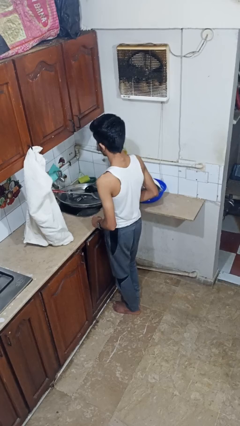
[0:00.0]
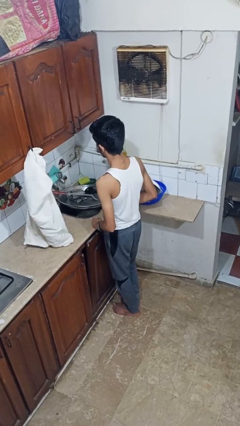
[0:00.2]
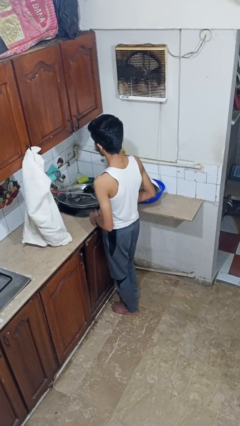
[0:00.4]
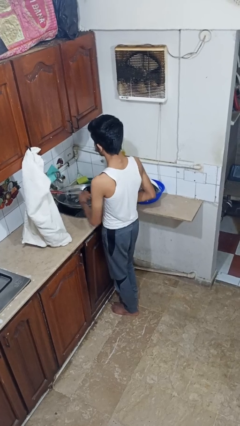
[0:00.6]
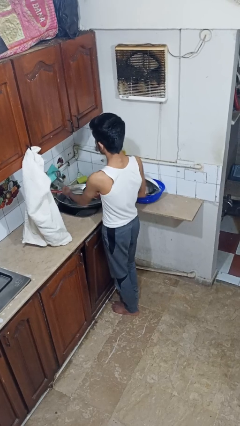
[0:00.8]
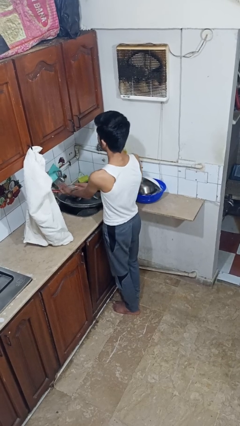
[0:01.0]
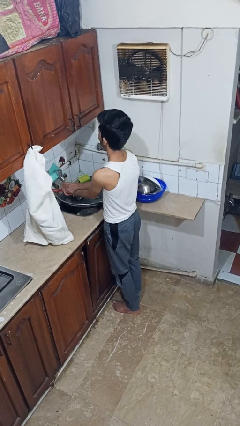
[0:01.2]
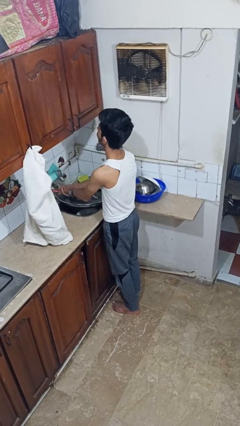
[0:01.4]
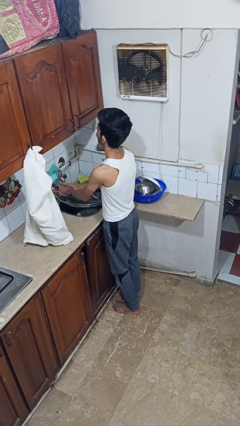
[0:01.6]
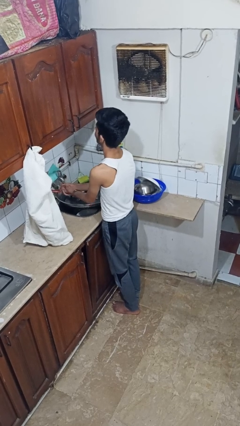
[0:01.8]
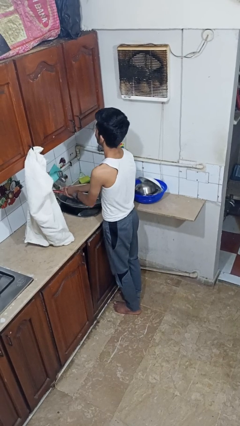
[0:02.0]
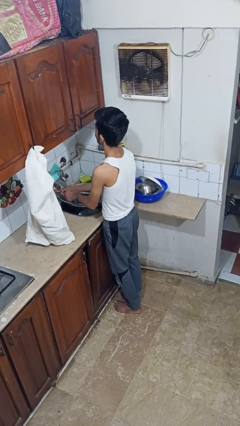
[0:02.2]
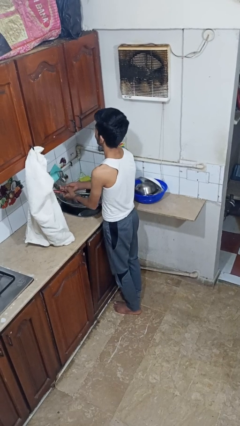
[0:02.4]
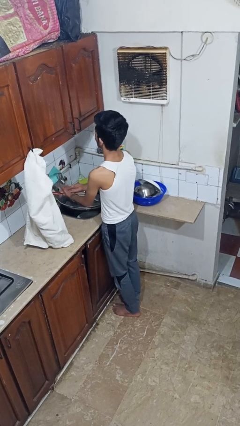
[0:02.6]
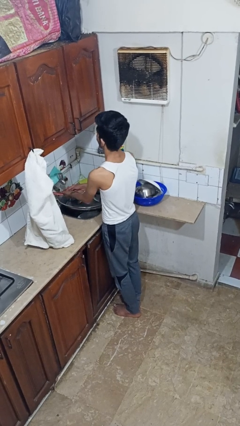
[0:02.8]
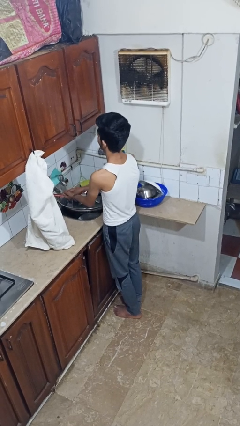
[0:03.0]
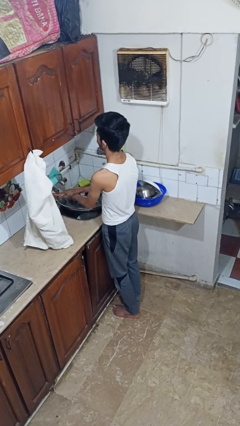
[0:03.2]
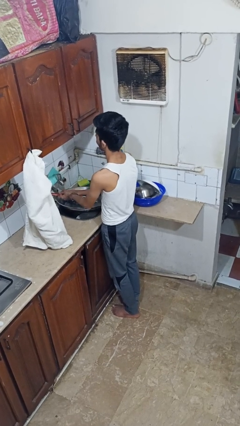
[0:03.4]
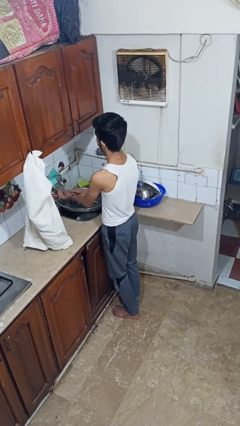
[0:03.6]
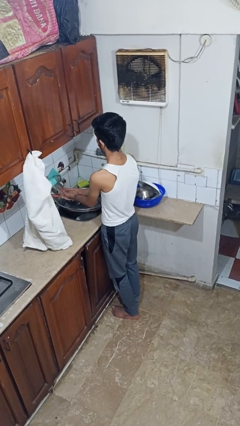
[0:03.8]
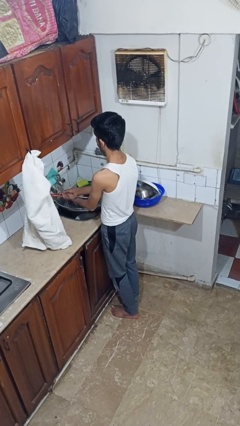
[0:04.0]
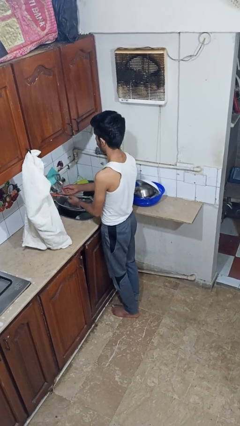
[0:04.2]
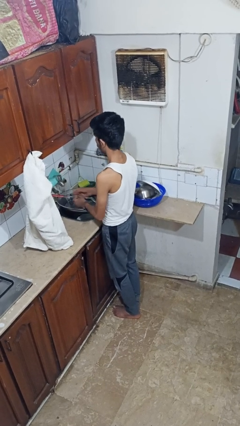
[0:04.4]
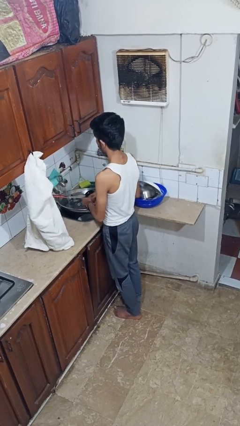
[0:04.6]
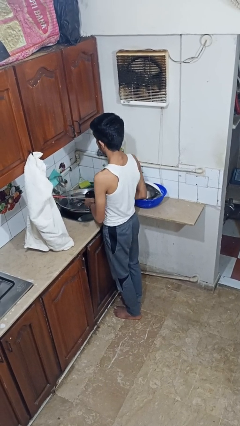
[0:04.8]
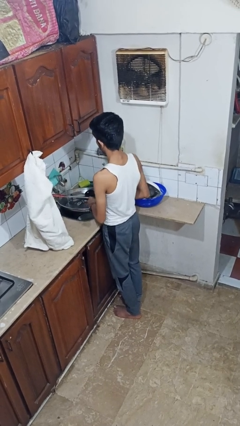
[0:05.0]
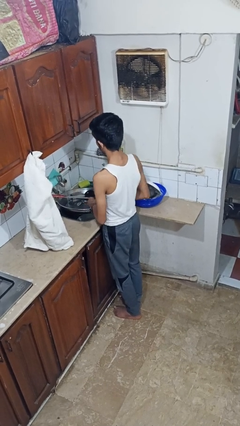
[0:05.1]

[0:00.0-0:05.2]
person washes hands

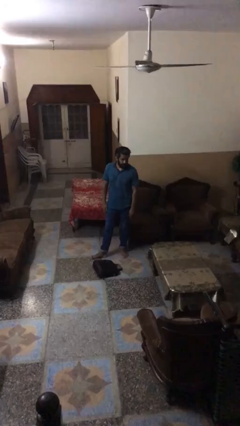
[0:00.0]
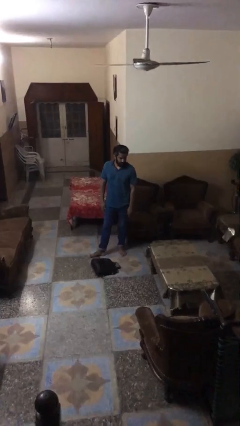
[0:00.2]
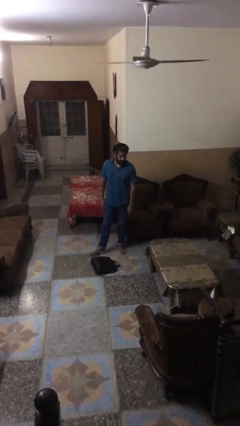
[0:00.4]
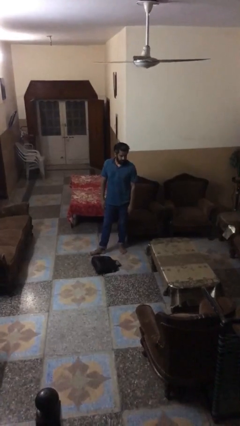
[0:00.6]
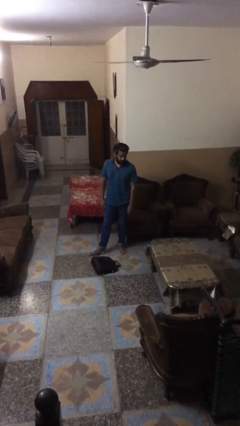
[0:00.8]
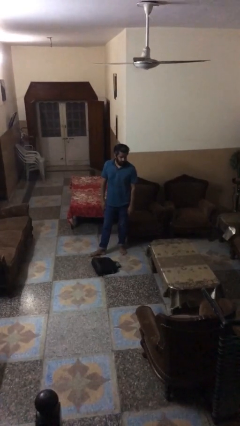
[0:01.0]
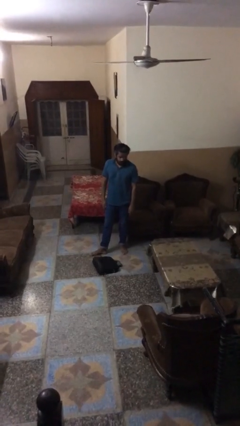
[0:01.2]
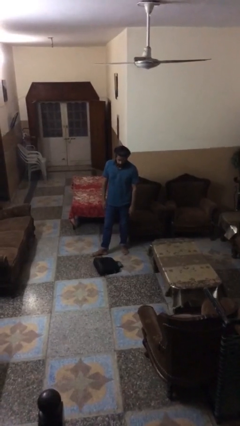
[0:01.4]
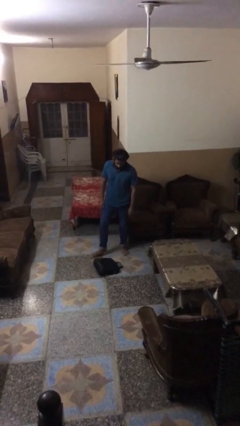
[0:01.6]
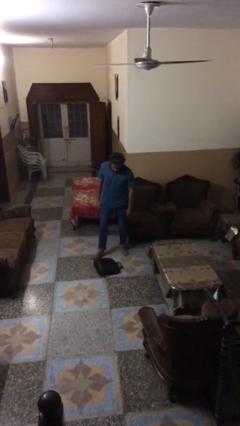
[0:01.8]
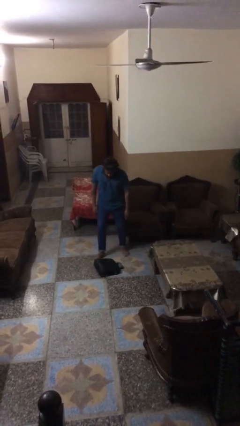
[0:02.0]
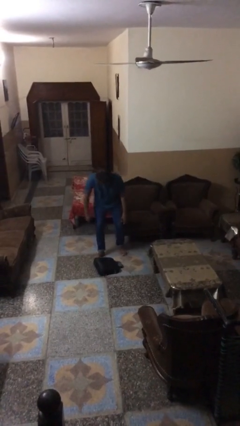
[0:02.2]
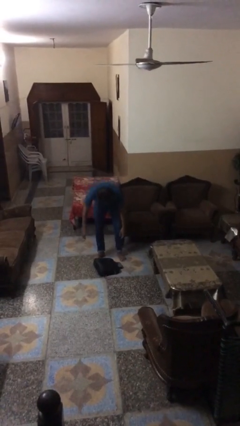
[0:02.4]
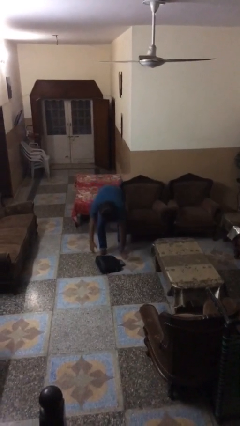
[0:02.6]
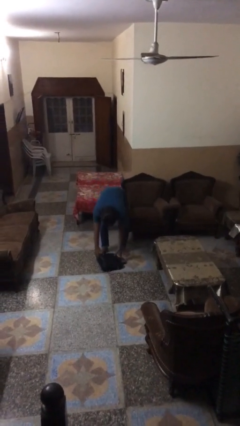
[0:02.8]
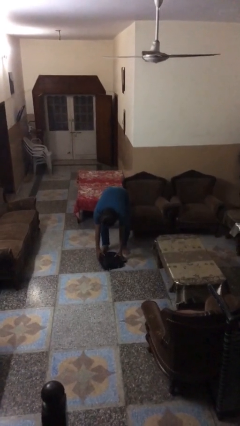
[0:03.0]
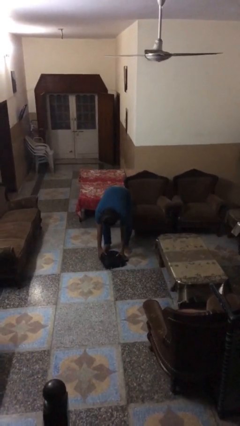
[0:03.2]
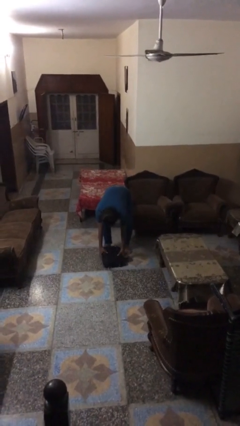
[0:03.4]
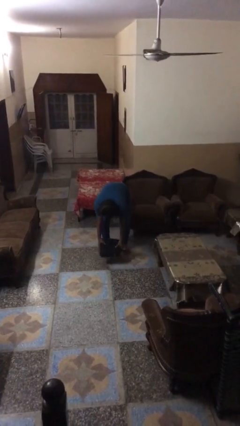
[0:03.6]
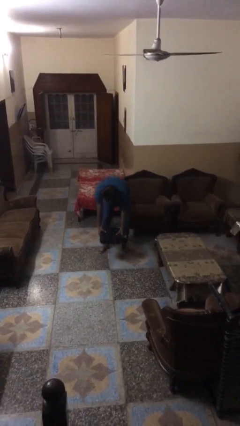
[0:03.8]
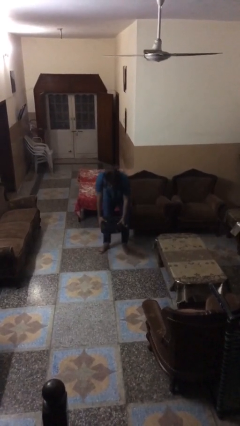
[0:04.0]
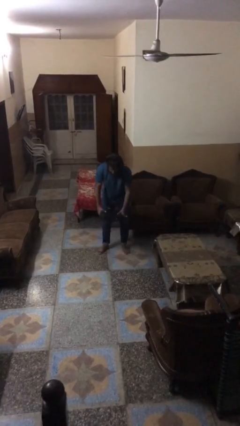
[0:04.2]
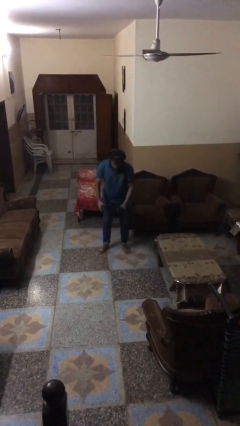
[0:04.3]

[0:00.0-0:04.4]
person picks up object from floor

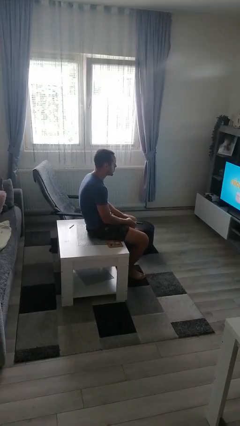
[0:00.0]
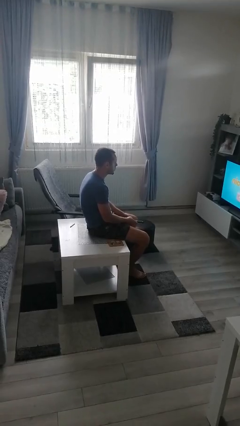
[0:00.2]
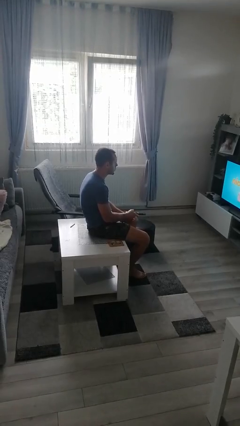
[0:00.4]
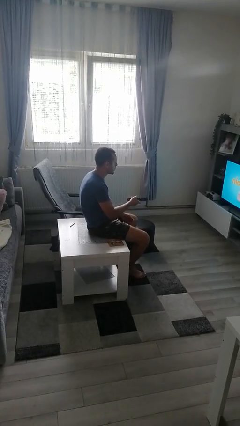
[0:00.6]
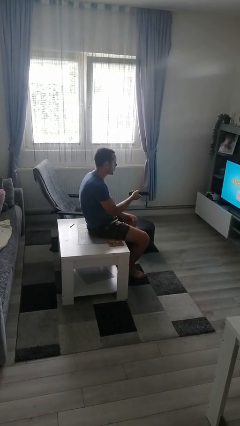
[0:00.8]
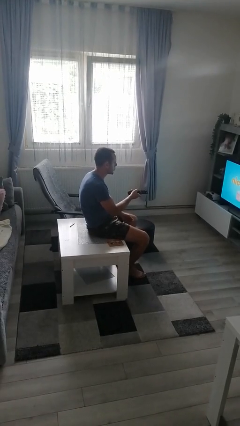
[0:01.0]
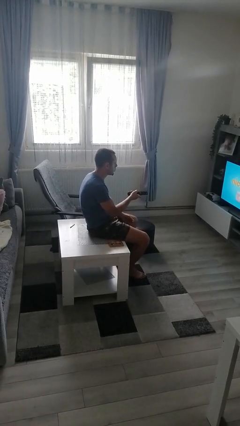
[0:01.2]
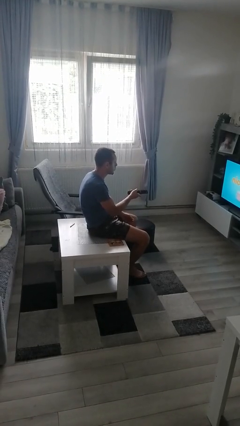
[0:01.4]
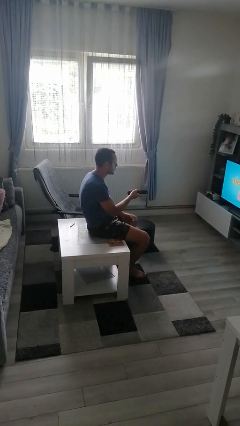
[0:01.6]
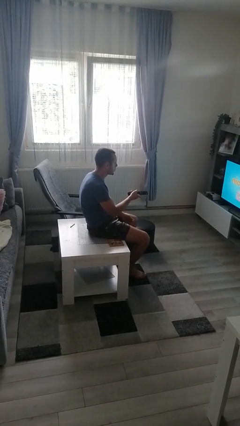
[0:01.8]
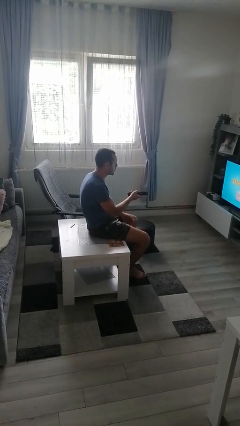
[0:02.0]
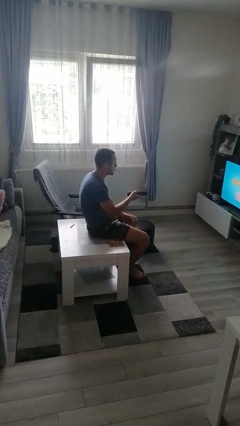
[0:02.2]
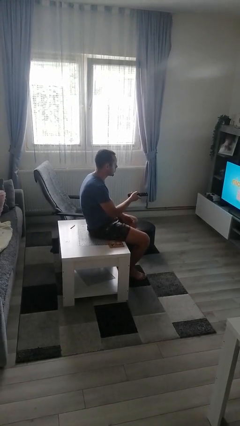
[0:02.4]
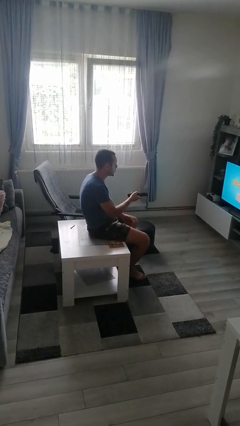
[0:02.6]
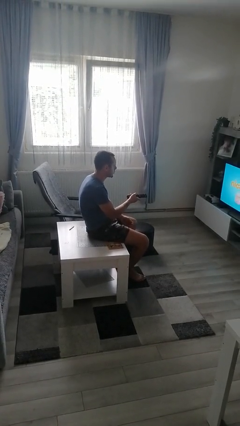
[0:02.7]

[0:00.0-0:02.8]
person uses television remote

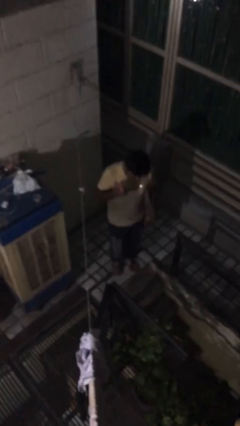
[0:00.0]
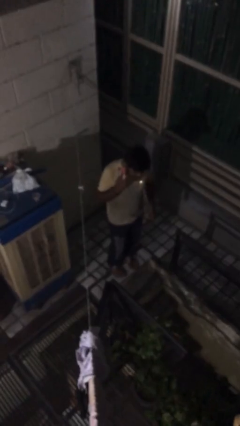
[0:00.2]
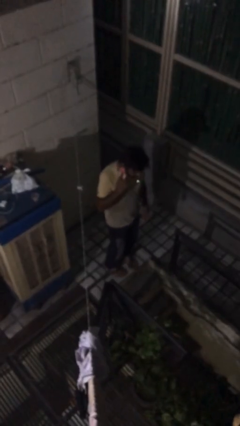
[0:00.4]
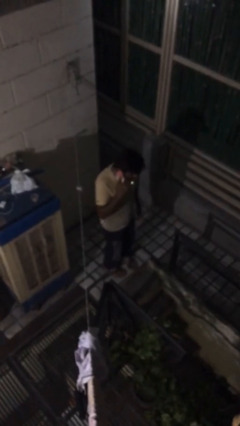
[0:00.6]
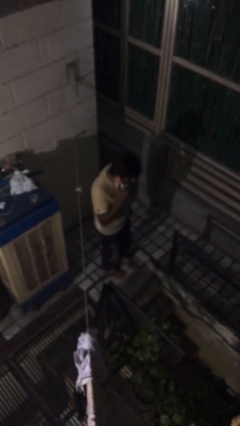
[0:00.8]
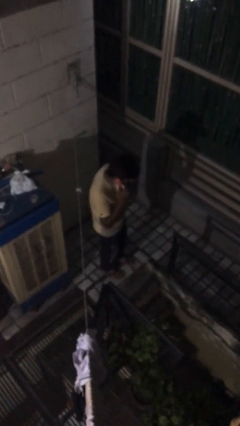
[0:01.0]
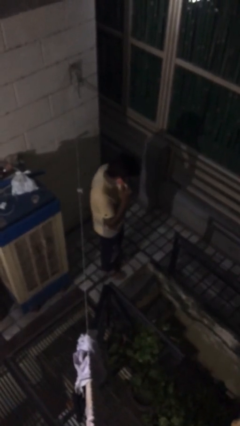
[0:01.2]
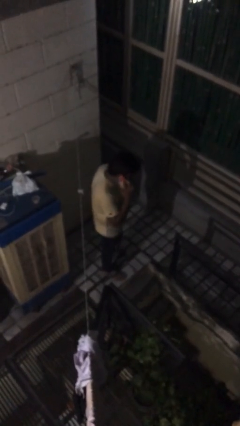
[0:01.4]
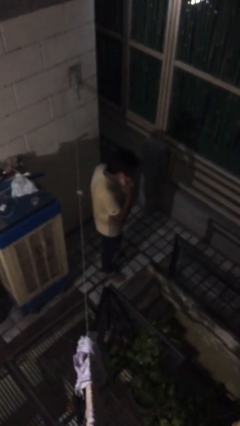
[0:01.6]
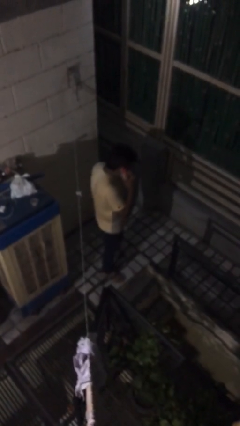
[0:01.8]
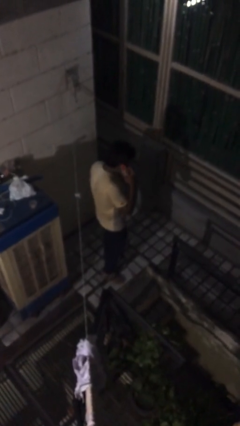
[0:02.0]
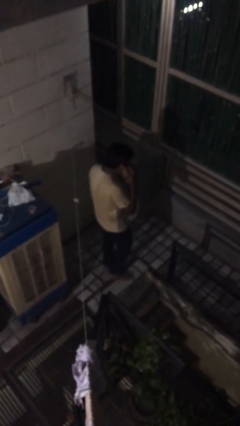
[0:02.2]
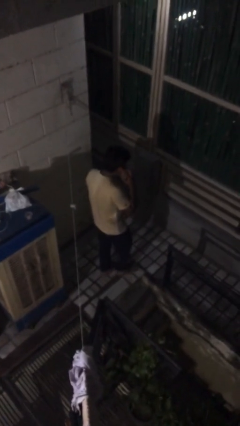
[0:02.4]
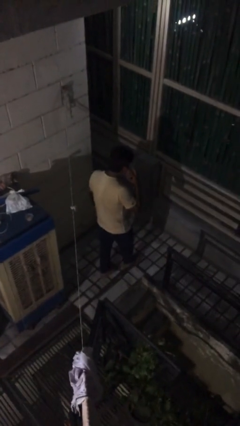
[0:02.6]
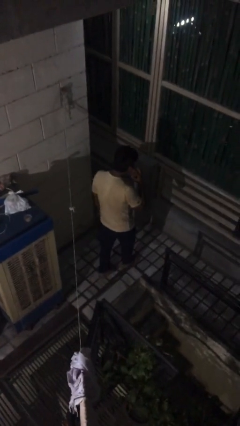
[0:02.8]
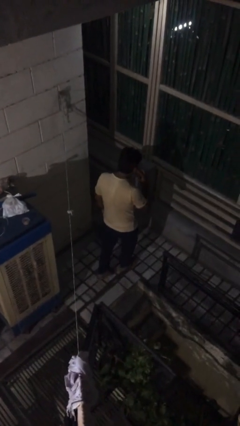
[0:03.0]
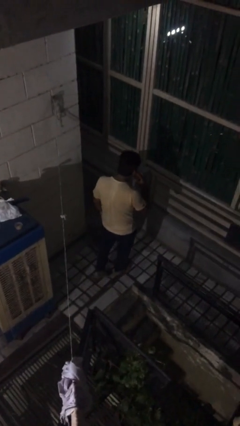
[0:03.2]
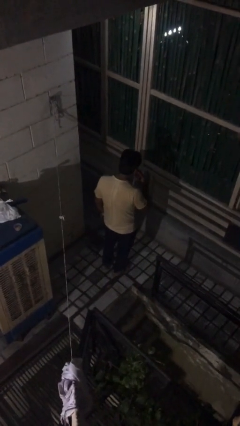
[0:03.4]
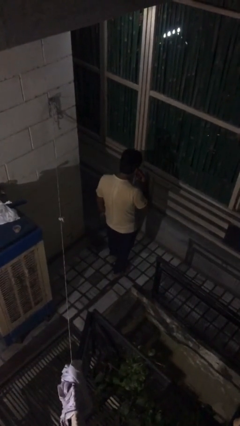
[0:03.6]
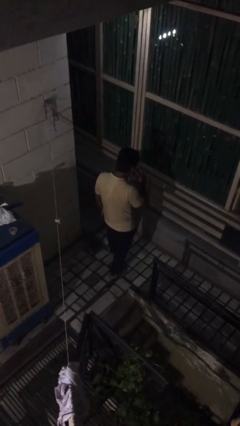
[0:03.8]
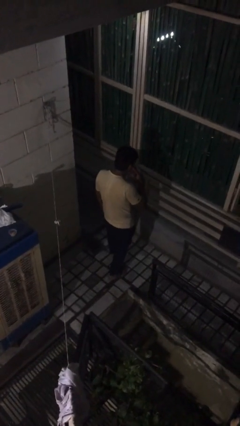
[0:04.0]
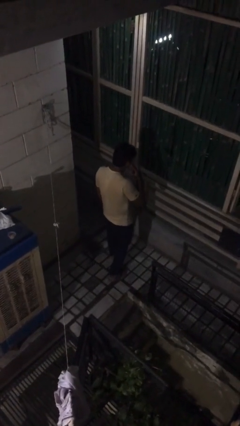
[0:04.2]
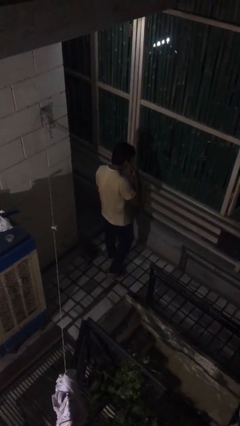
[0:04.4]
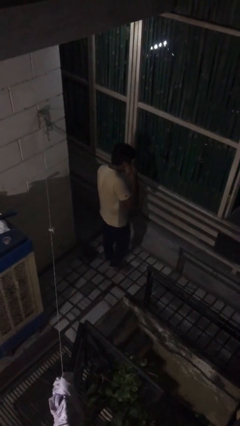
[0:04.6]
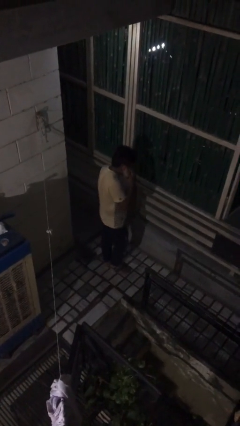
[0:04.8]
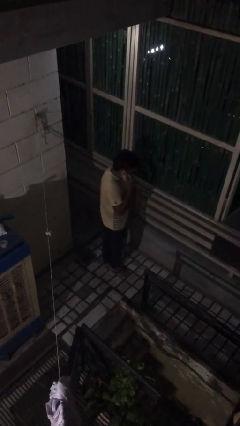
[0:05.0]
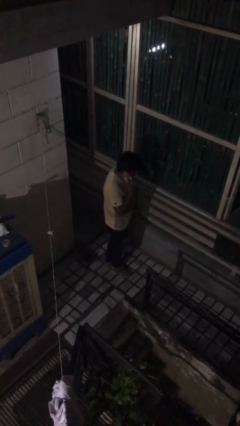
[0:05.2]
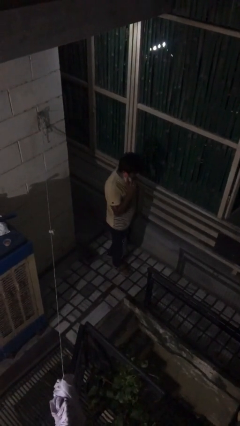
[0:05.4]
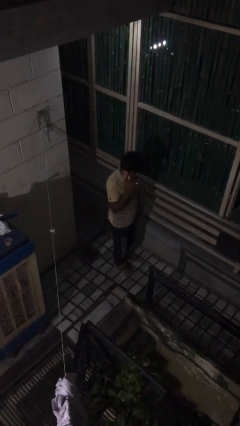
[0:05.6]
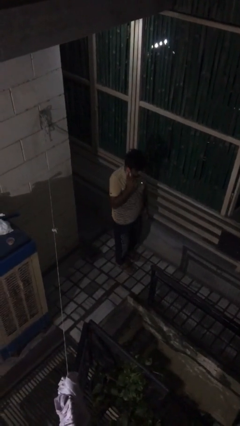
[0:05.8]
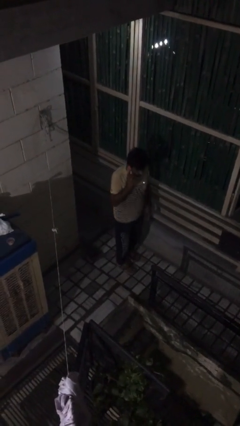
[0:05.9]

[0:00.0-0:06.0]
person talks on phone
